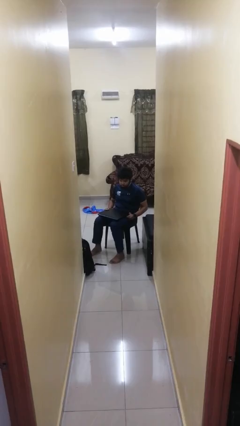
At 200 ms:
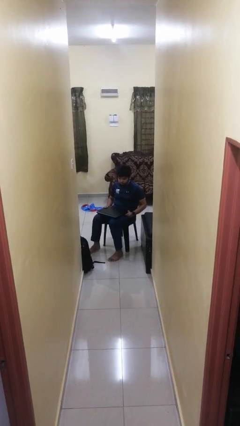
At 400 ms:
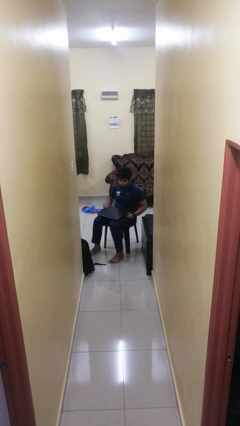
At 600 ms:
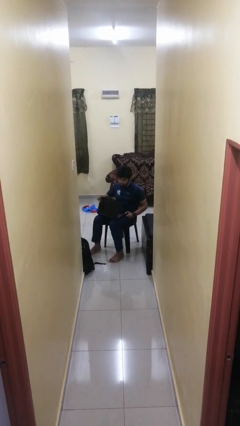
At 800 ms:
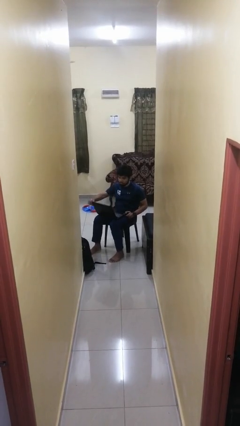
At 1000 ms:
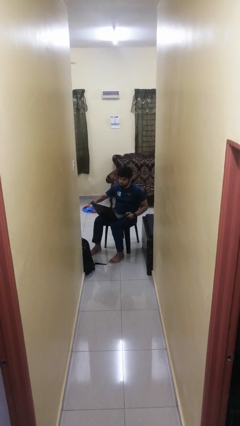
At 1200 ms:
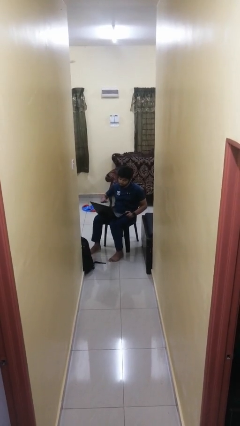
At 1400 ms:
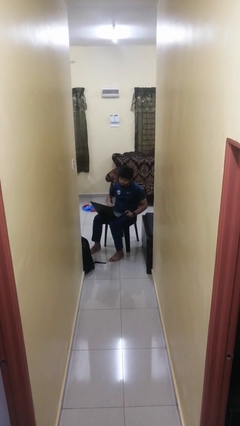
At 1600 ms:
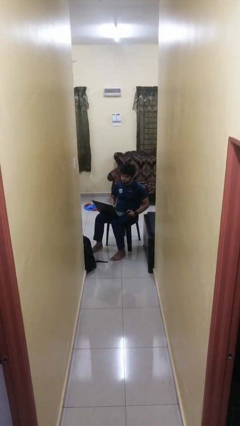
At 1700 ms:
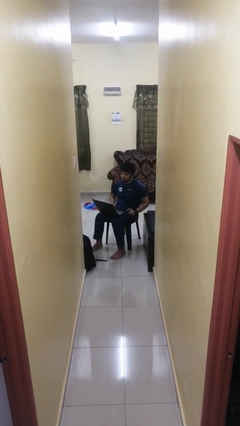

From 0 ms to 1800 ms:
person opens laptop

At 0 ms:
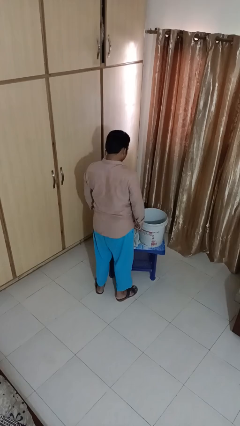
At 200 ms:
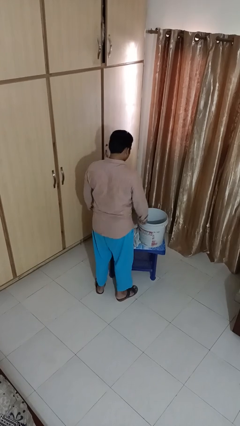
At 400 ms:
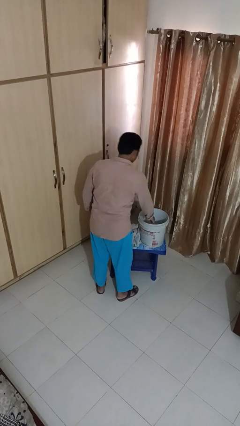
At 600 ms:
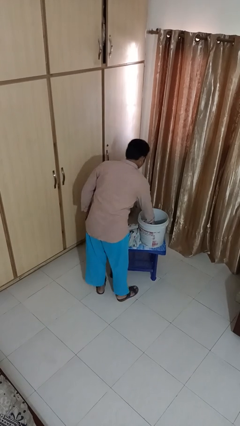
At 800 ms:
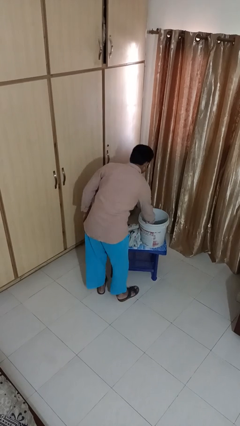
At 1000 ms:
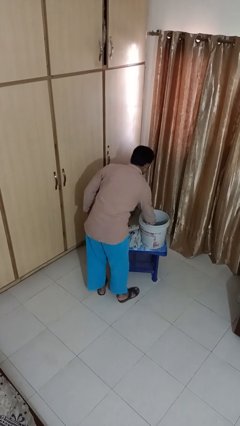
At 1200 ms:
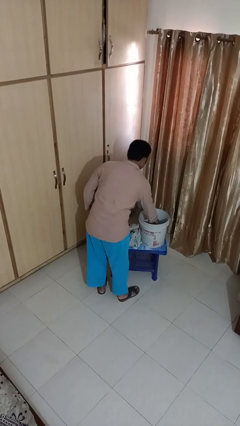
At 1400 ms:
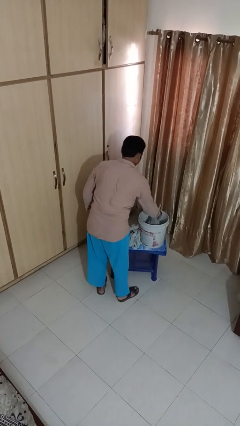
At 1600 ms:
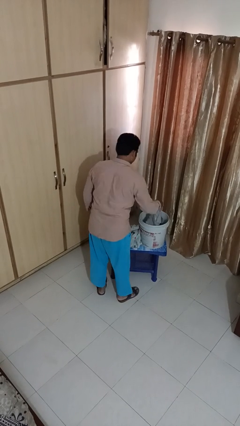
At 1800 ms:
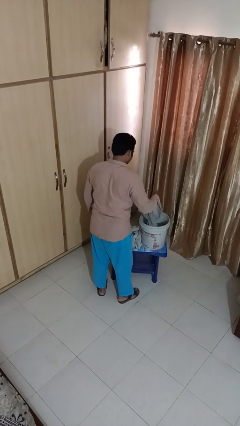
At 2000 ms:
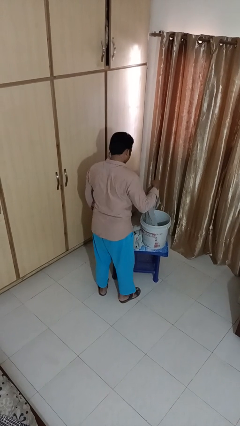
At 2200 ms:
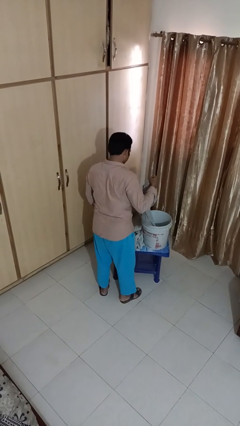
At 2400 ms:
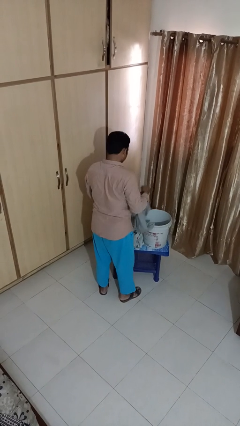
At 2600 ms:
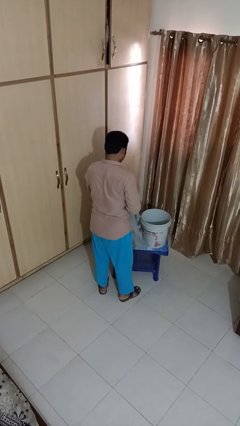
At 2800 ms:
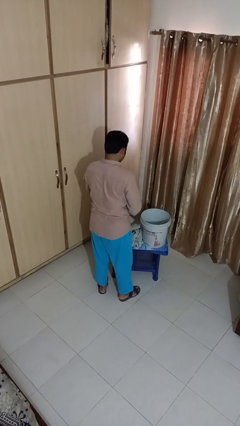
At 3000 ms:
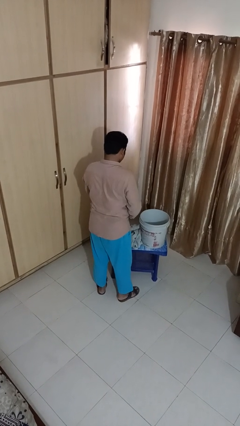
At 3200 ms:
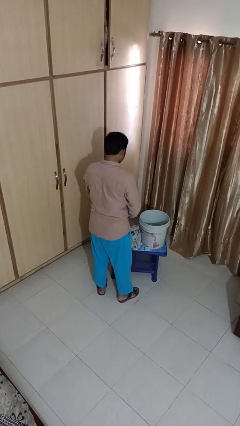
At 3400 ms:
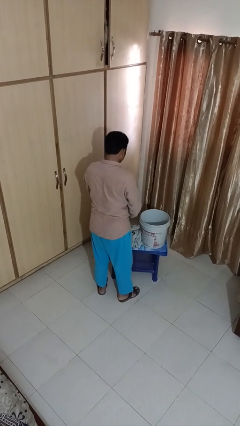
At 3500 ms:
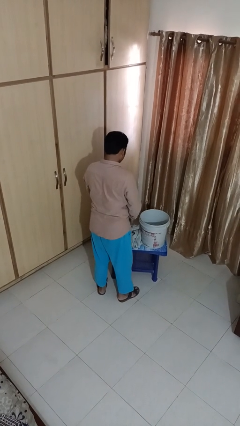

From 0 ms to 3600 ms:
person takes object from basket

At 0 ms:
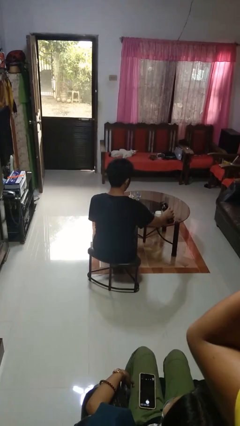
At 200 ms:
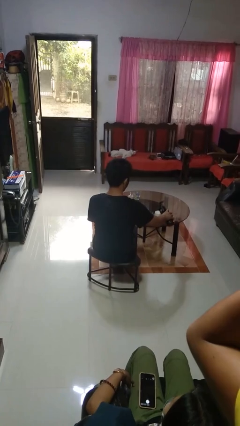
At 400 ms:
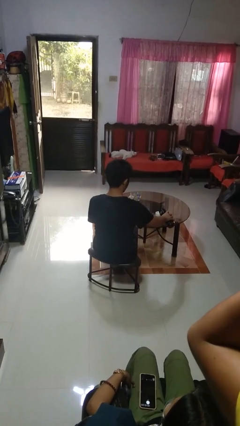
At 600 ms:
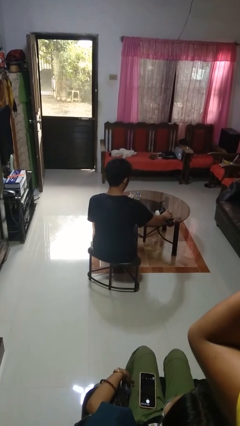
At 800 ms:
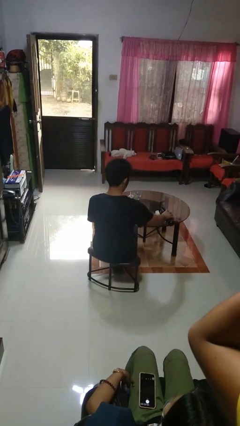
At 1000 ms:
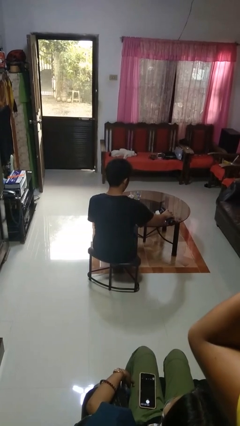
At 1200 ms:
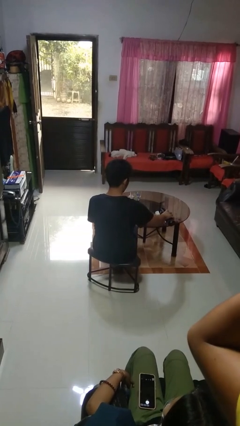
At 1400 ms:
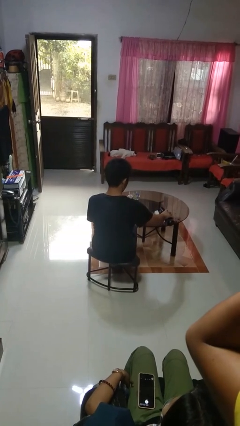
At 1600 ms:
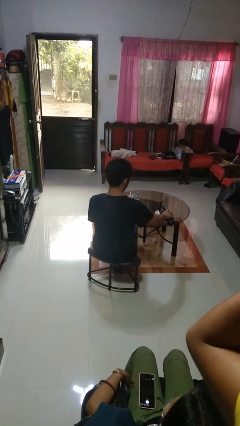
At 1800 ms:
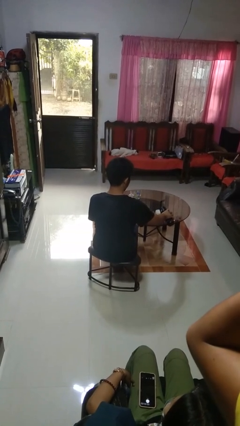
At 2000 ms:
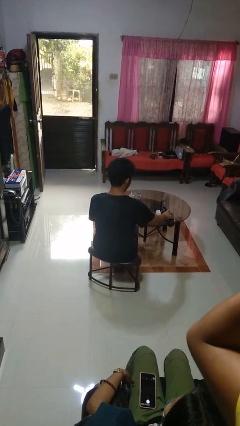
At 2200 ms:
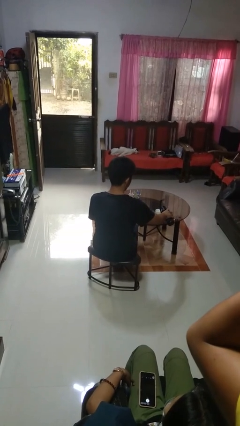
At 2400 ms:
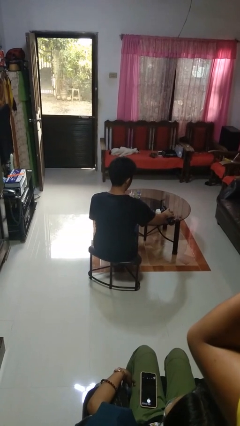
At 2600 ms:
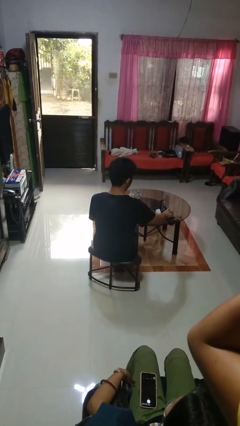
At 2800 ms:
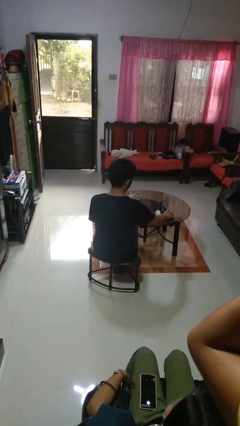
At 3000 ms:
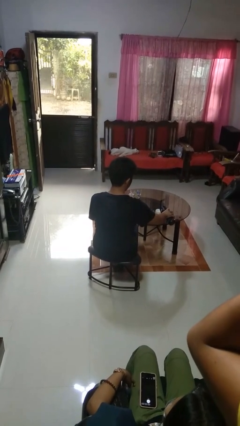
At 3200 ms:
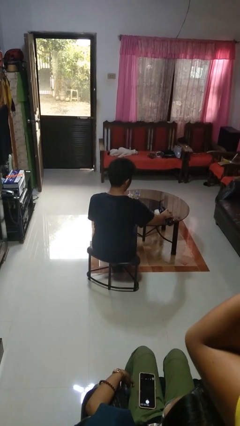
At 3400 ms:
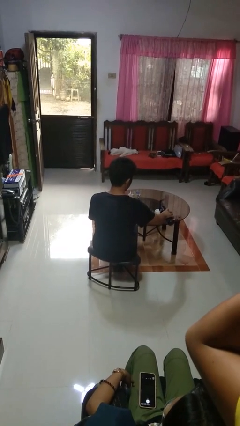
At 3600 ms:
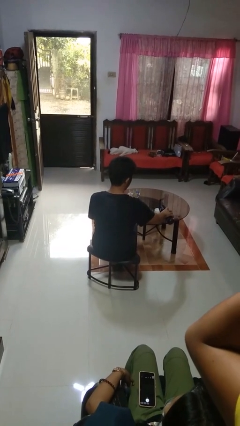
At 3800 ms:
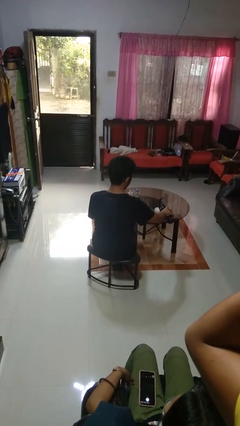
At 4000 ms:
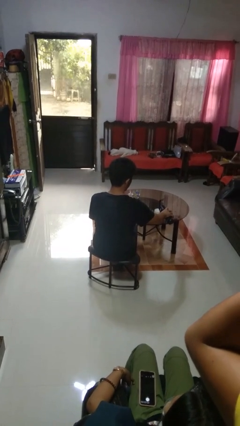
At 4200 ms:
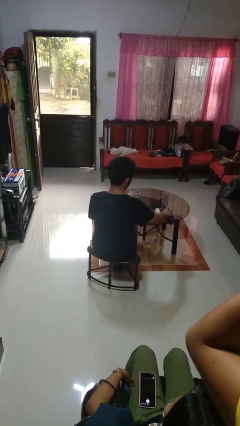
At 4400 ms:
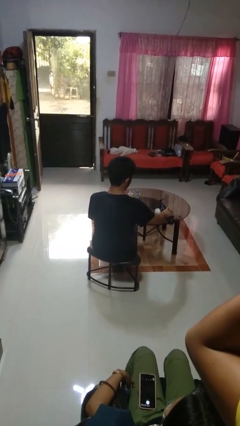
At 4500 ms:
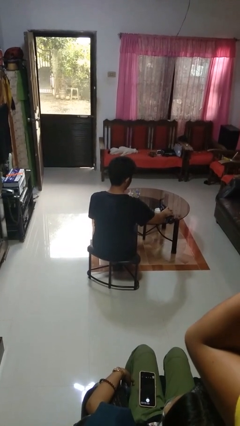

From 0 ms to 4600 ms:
person pours liquid into cup

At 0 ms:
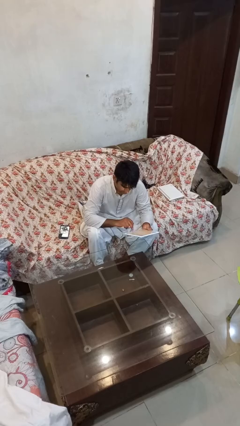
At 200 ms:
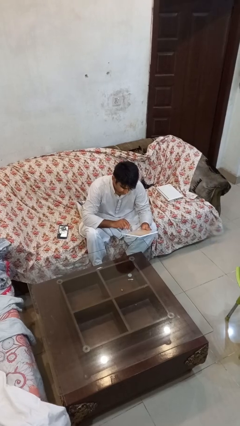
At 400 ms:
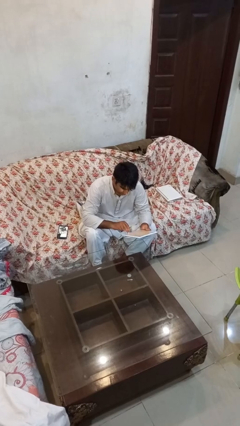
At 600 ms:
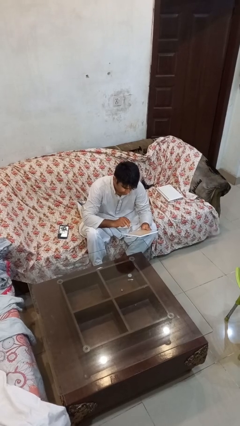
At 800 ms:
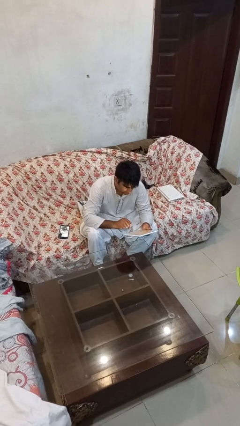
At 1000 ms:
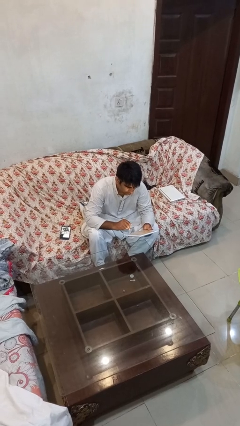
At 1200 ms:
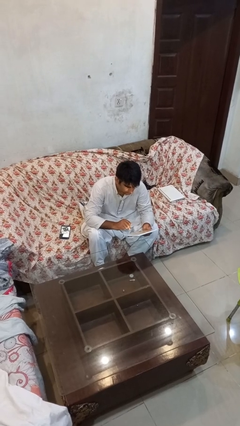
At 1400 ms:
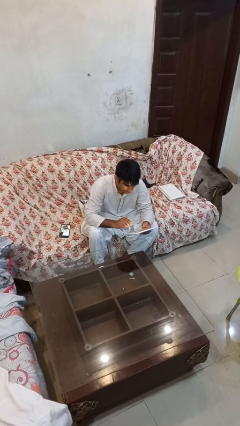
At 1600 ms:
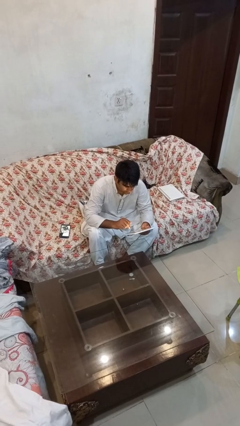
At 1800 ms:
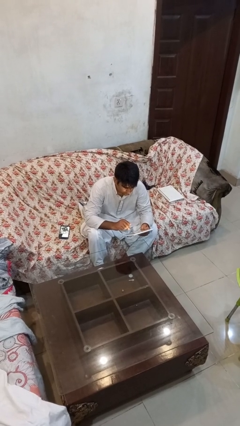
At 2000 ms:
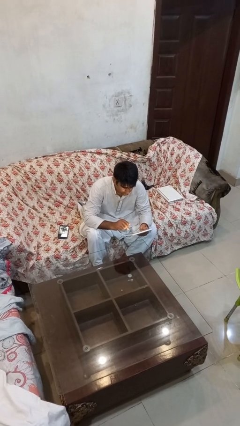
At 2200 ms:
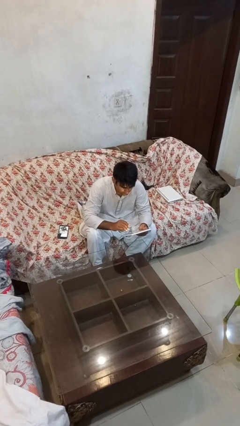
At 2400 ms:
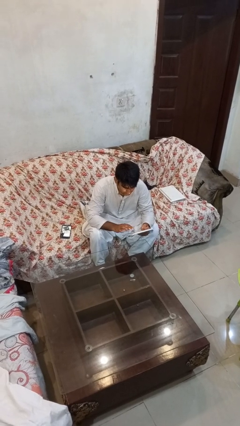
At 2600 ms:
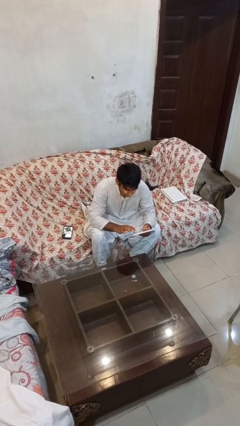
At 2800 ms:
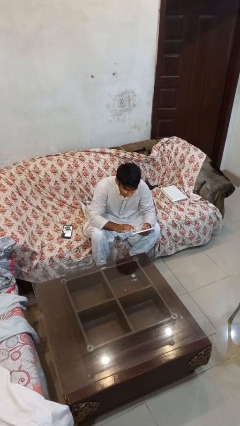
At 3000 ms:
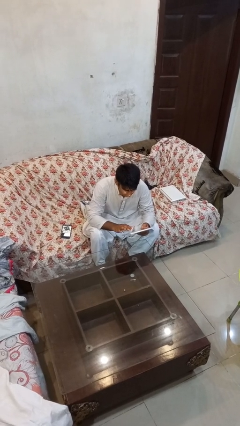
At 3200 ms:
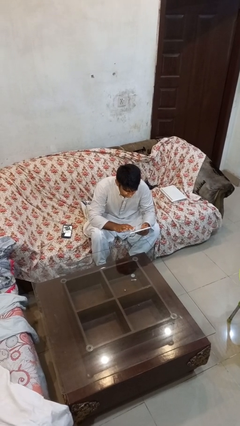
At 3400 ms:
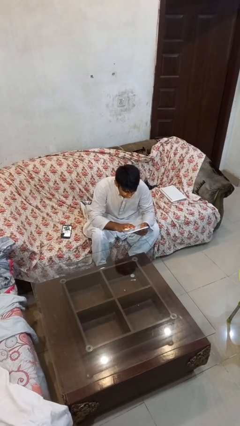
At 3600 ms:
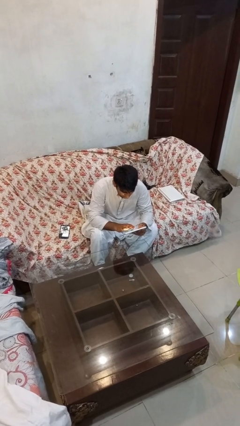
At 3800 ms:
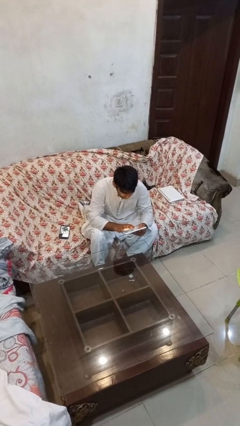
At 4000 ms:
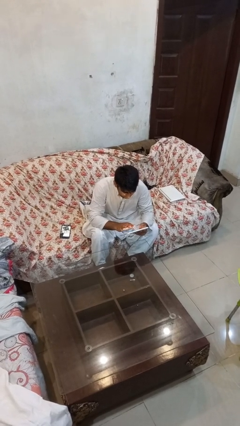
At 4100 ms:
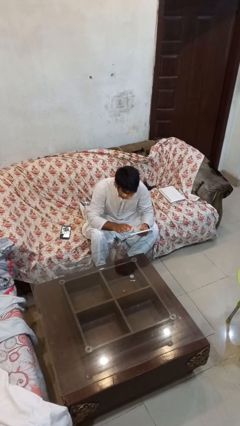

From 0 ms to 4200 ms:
person interacts with tablet

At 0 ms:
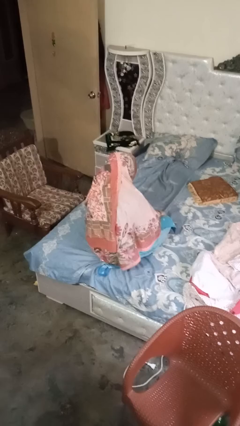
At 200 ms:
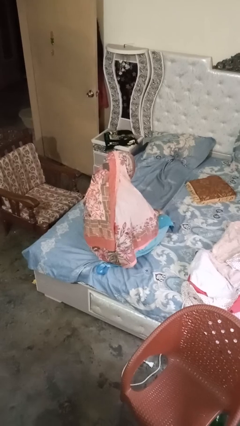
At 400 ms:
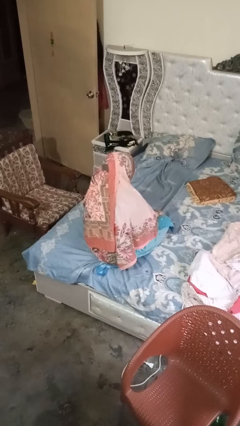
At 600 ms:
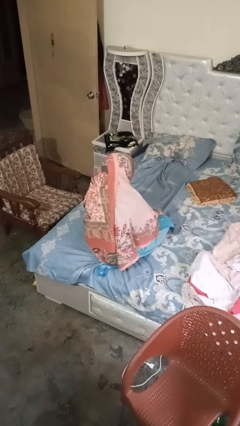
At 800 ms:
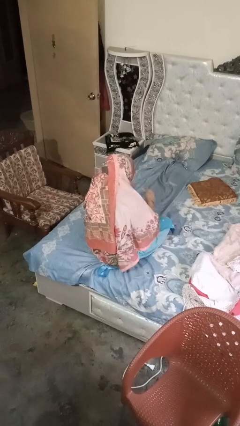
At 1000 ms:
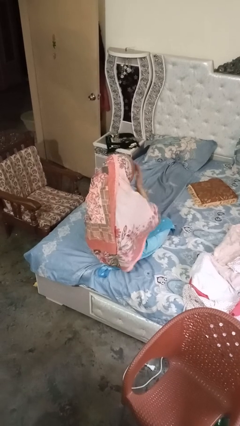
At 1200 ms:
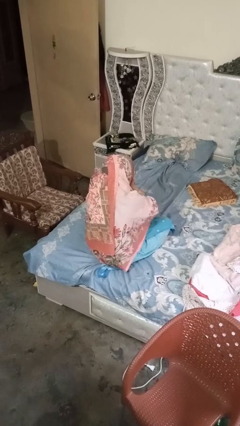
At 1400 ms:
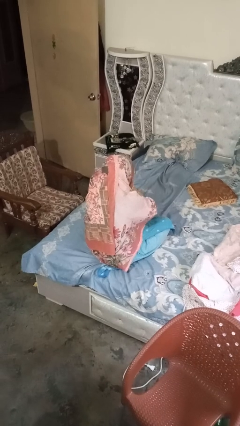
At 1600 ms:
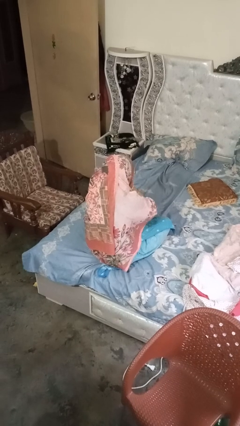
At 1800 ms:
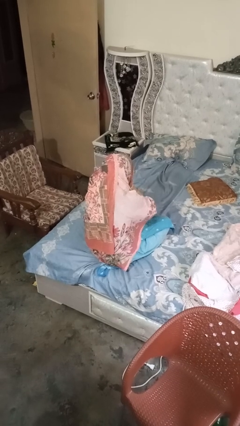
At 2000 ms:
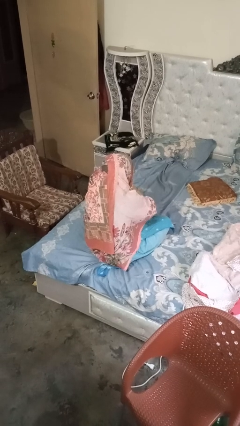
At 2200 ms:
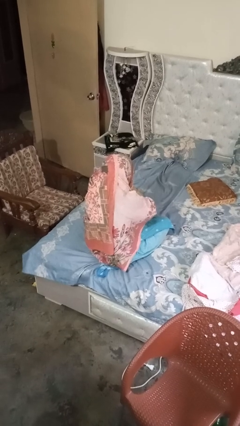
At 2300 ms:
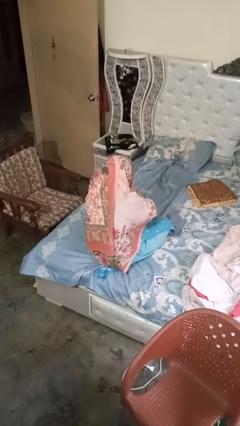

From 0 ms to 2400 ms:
person covers face with hands

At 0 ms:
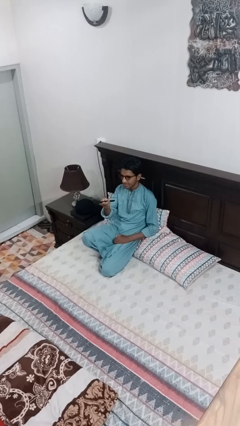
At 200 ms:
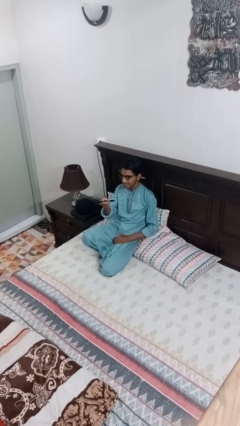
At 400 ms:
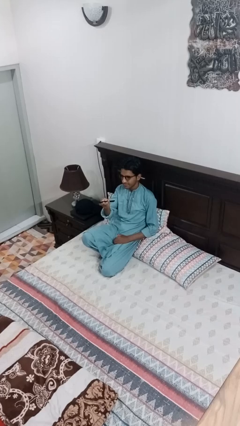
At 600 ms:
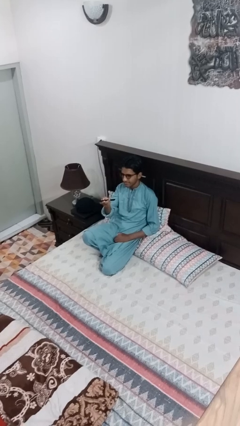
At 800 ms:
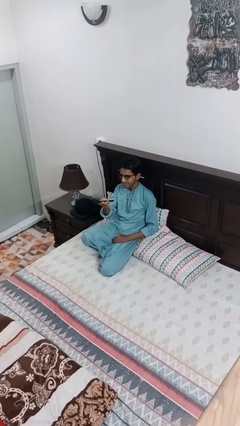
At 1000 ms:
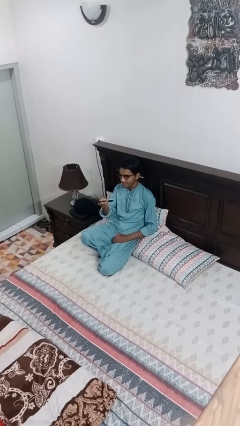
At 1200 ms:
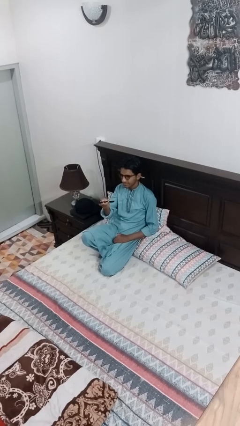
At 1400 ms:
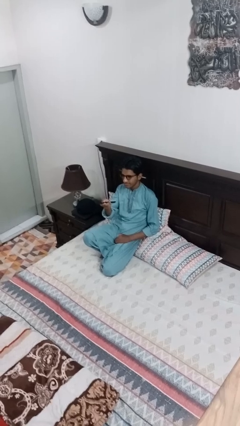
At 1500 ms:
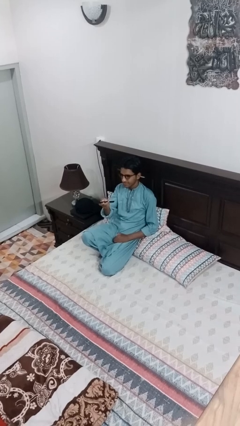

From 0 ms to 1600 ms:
person uses television remote
